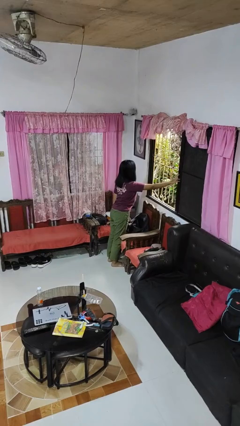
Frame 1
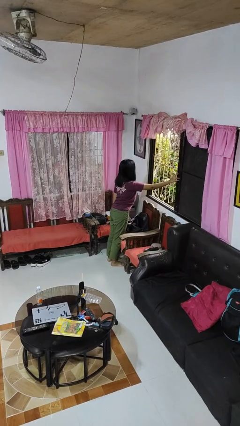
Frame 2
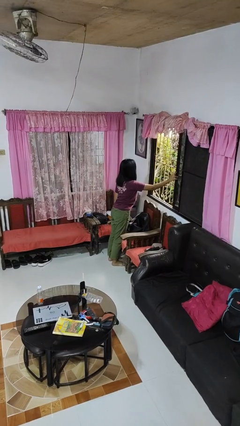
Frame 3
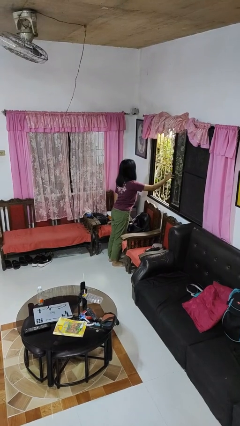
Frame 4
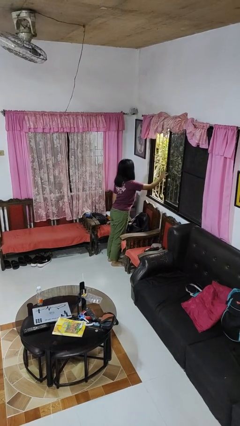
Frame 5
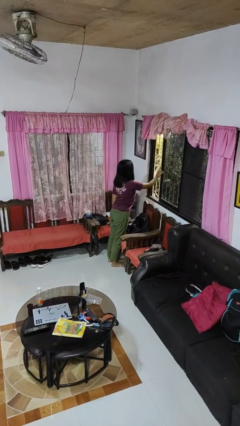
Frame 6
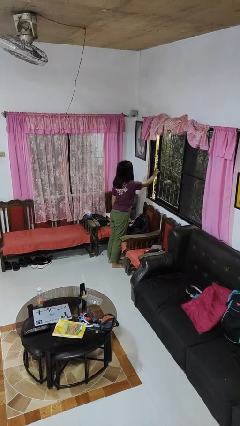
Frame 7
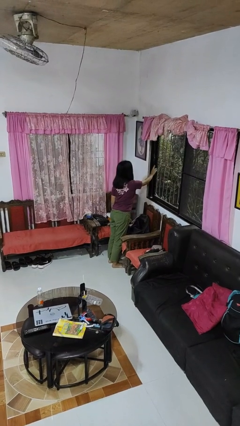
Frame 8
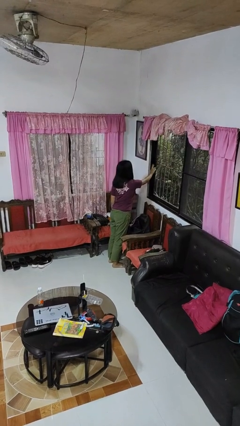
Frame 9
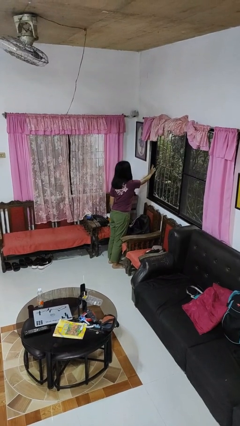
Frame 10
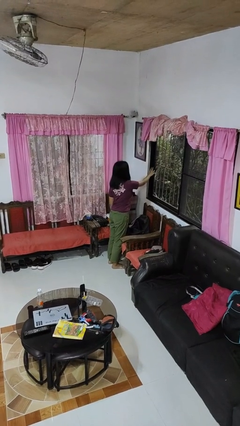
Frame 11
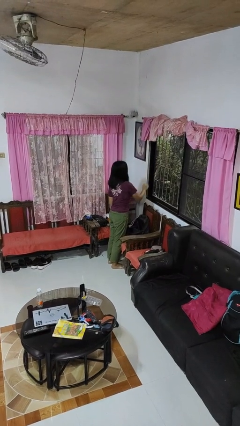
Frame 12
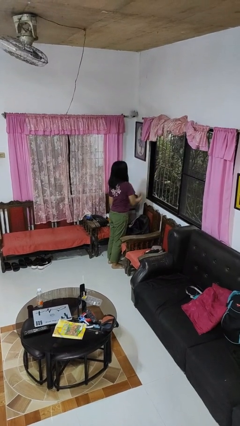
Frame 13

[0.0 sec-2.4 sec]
person closes home window

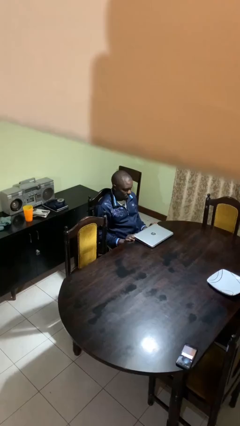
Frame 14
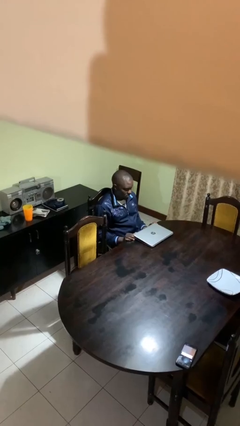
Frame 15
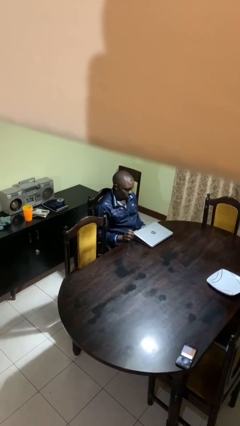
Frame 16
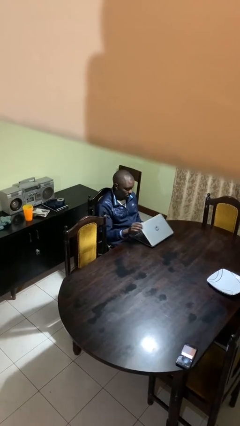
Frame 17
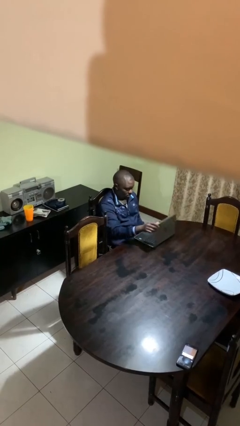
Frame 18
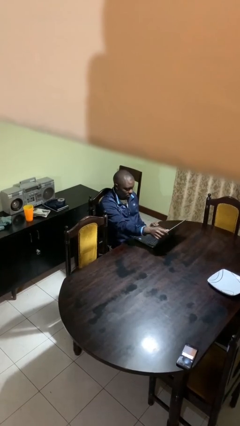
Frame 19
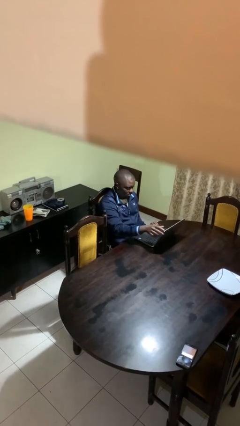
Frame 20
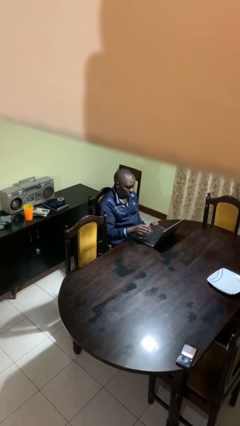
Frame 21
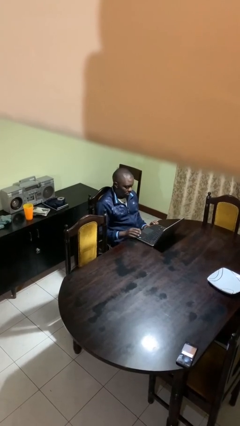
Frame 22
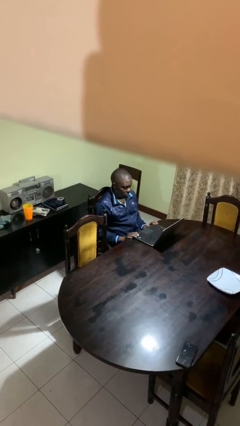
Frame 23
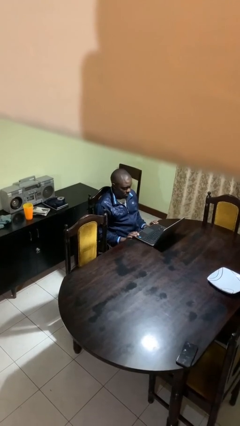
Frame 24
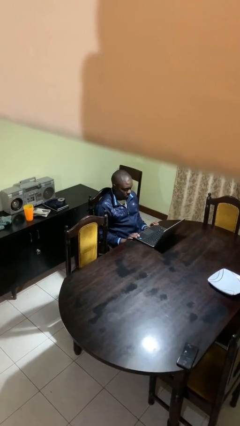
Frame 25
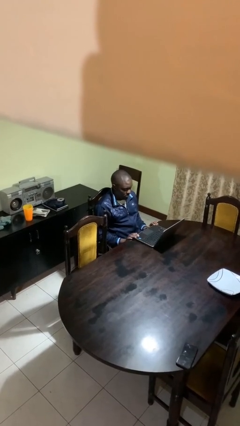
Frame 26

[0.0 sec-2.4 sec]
person opens laptop

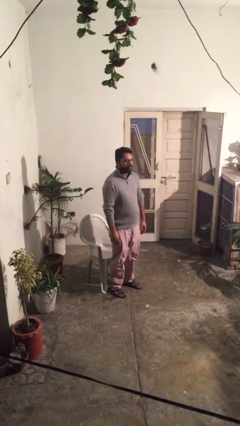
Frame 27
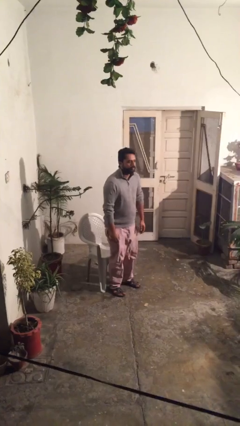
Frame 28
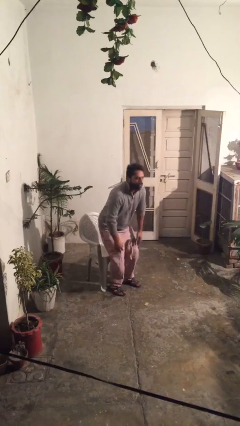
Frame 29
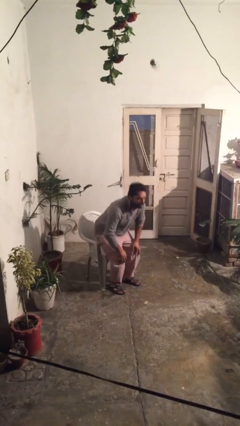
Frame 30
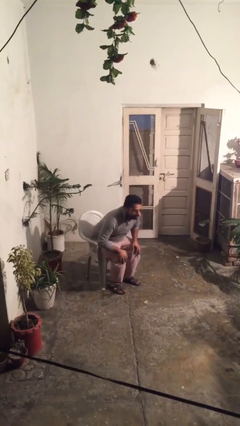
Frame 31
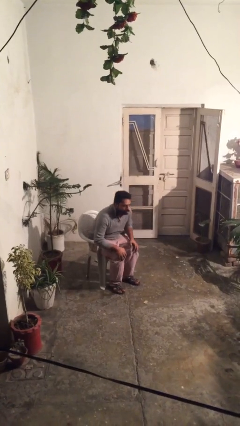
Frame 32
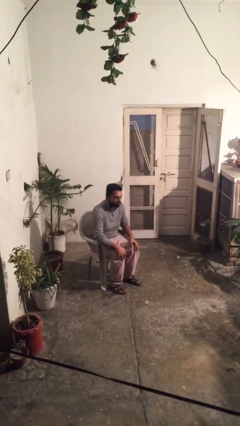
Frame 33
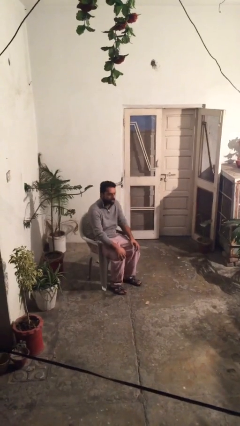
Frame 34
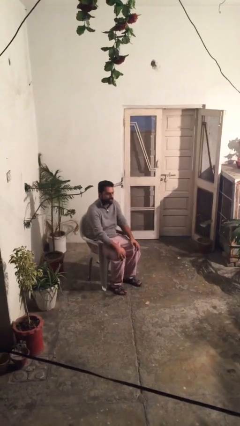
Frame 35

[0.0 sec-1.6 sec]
person sits down

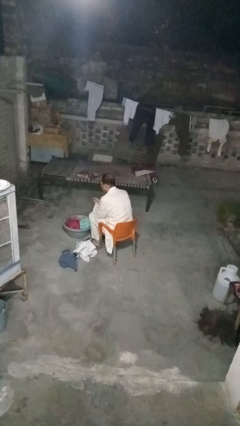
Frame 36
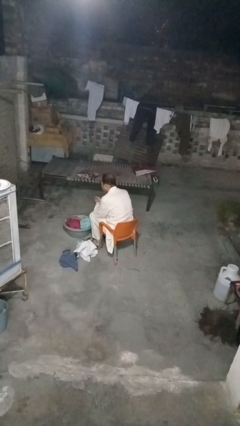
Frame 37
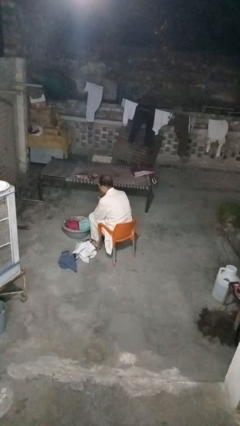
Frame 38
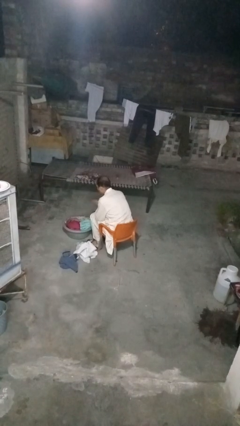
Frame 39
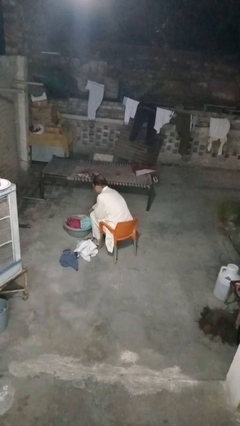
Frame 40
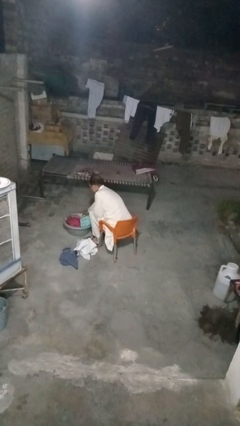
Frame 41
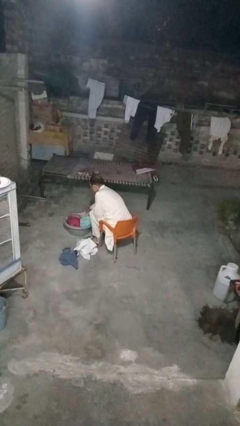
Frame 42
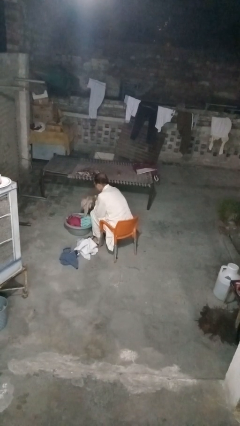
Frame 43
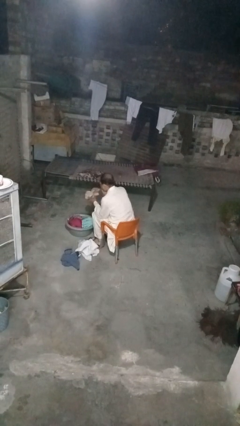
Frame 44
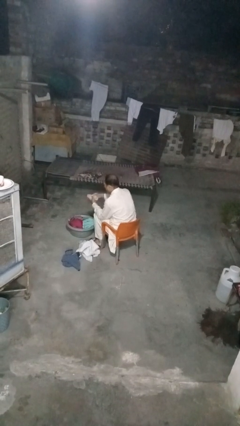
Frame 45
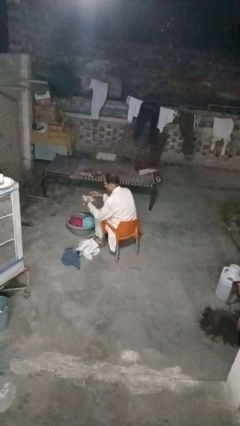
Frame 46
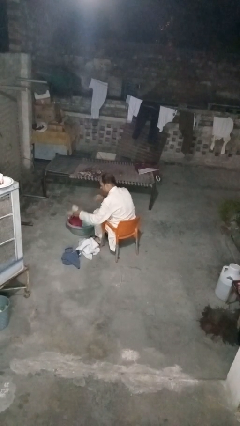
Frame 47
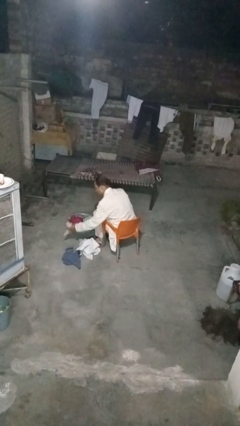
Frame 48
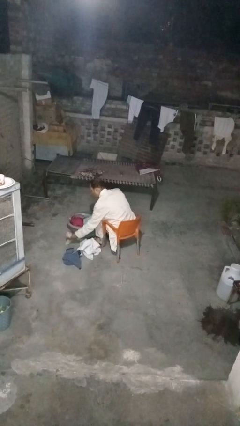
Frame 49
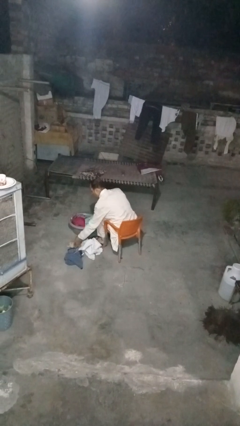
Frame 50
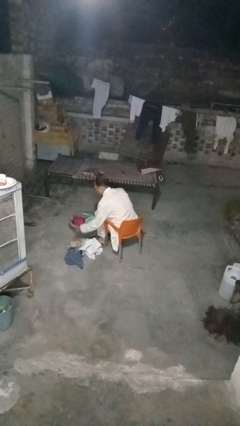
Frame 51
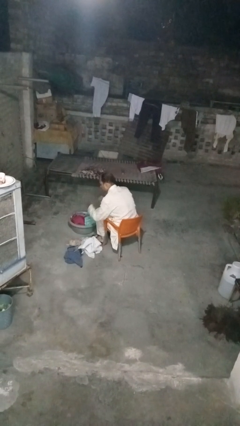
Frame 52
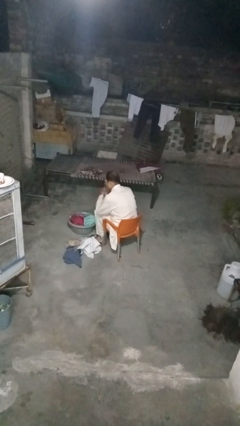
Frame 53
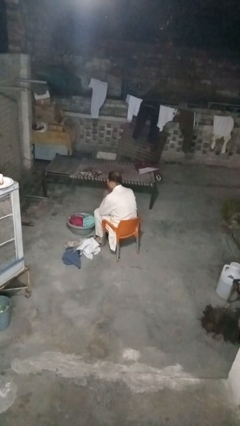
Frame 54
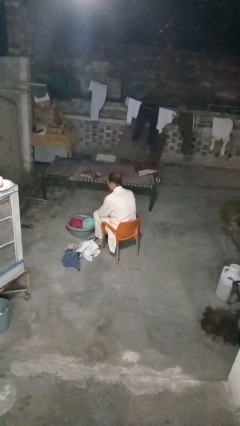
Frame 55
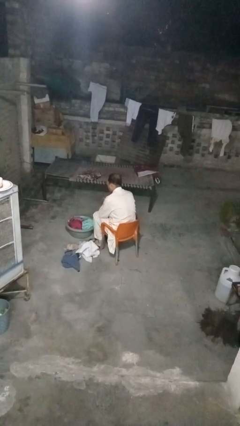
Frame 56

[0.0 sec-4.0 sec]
person takes object from basket

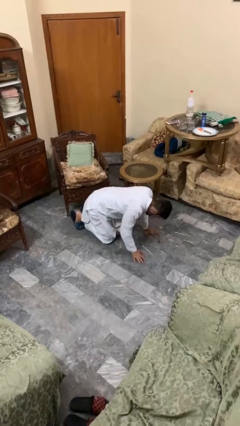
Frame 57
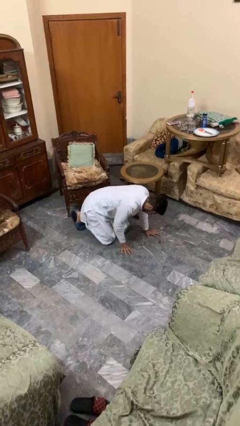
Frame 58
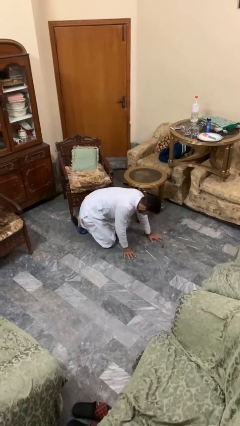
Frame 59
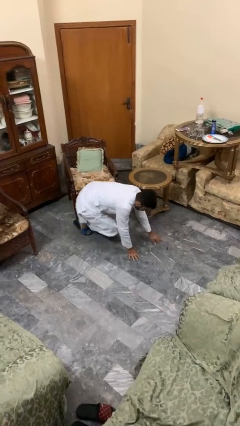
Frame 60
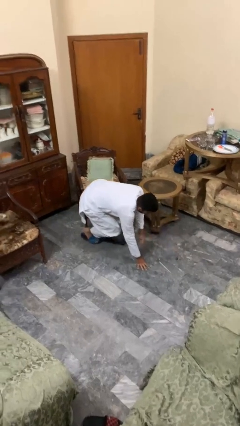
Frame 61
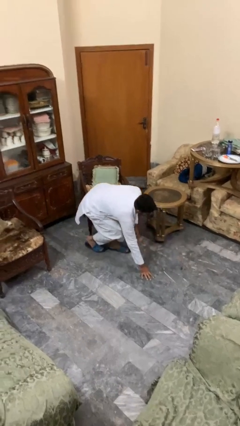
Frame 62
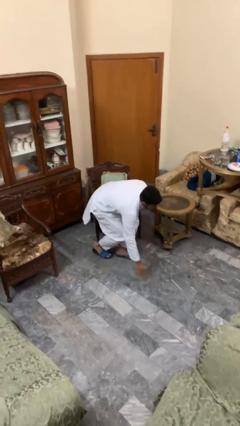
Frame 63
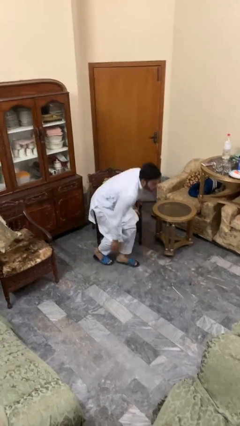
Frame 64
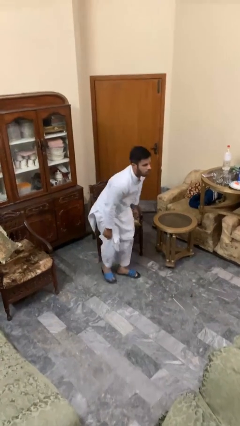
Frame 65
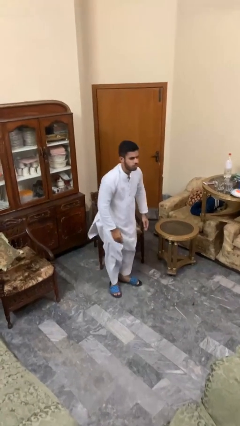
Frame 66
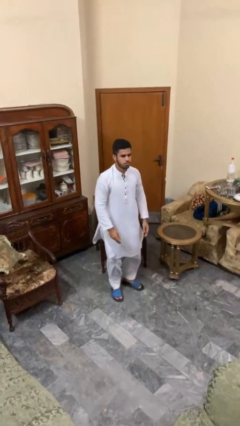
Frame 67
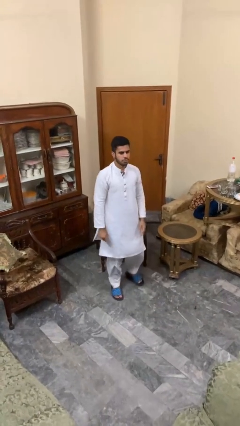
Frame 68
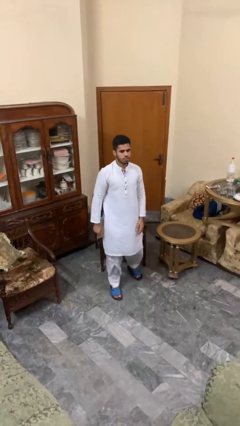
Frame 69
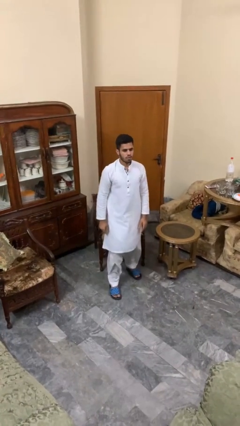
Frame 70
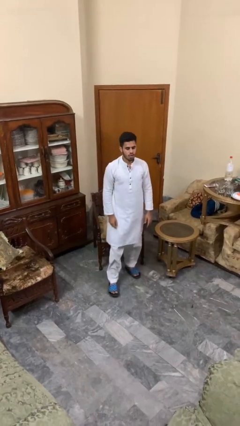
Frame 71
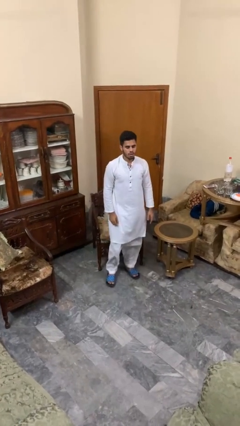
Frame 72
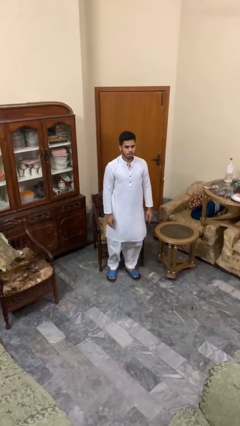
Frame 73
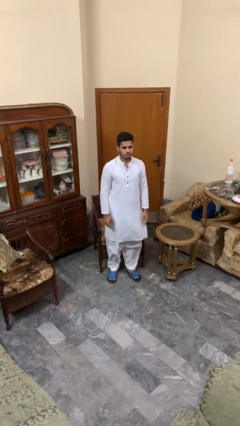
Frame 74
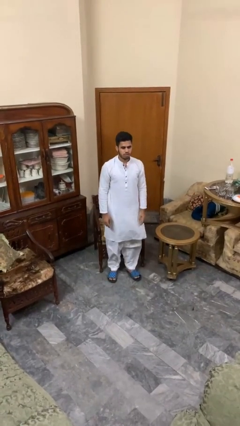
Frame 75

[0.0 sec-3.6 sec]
person stands up from floor

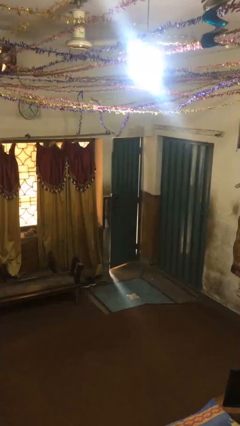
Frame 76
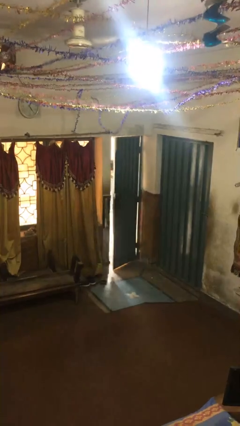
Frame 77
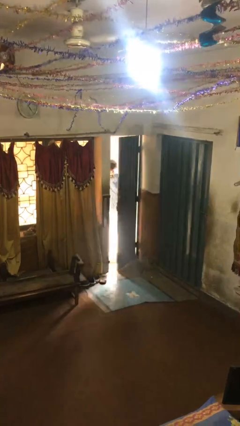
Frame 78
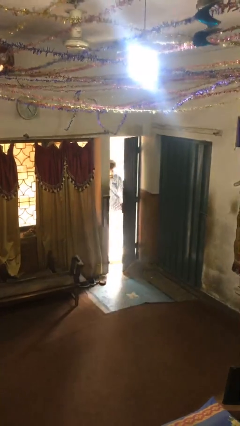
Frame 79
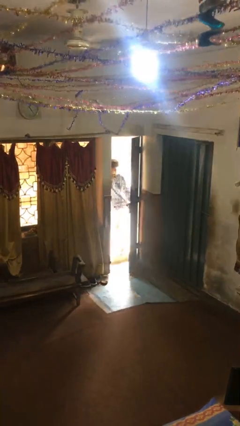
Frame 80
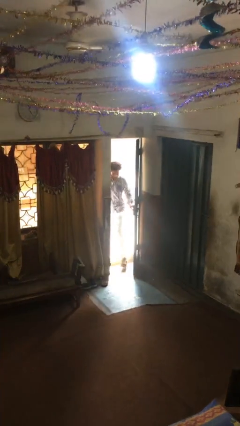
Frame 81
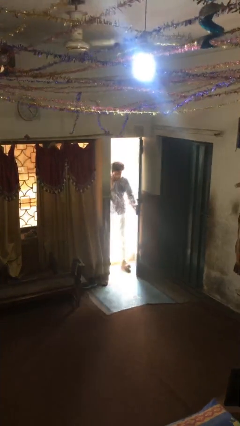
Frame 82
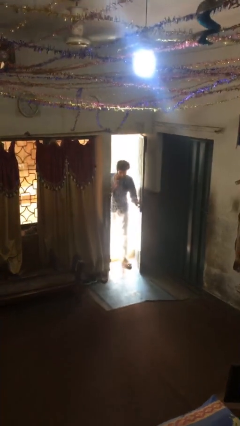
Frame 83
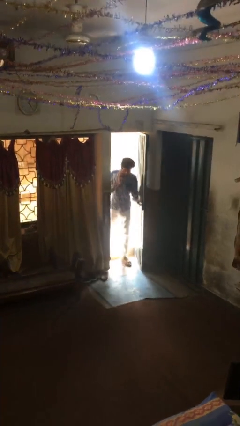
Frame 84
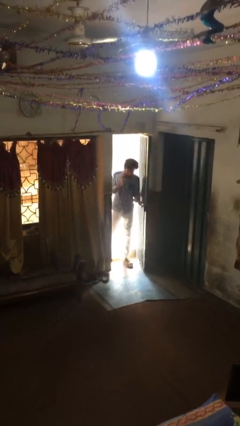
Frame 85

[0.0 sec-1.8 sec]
person opens facility door

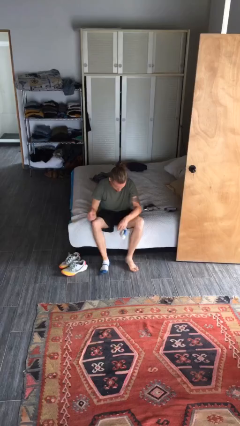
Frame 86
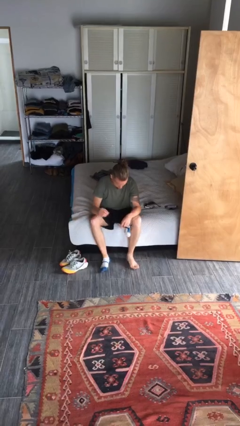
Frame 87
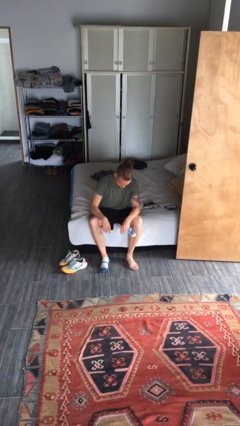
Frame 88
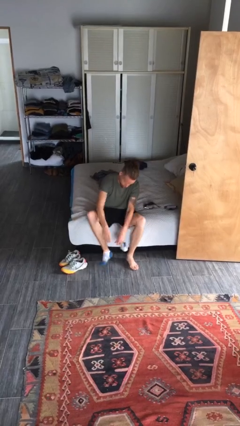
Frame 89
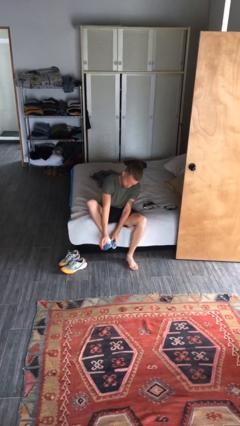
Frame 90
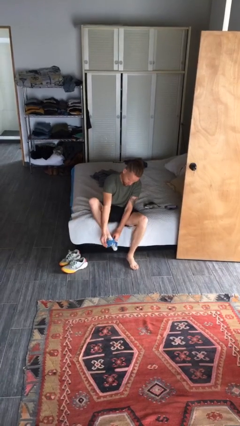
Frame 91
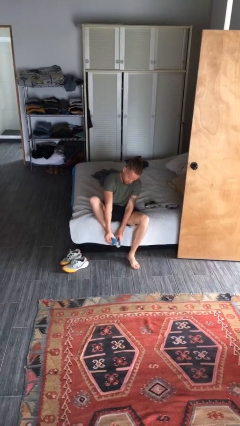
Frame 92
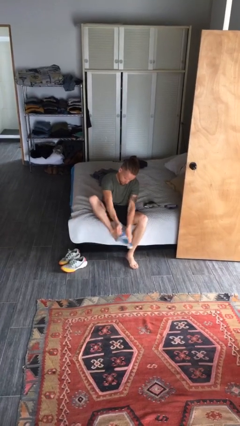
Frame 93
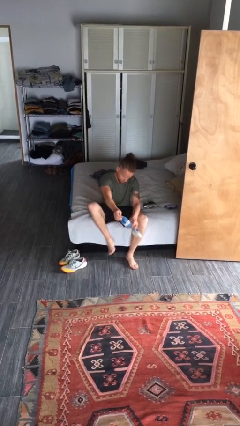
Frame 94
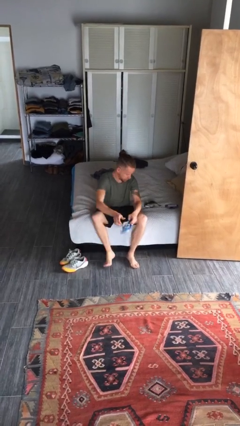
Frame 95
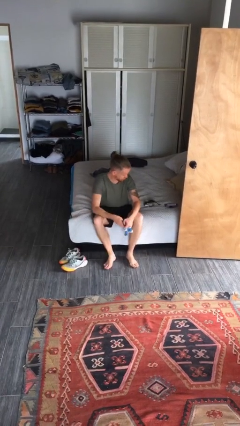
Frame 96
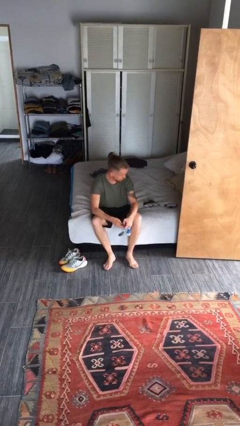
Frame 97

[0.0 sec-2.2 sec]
person takes off socks
